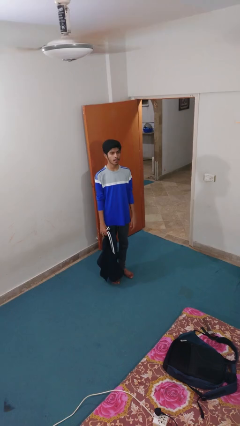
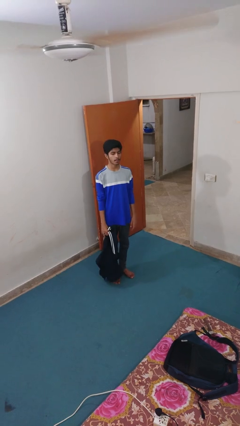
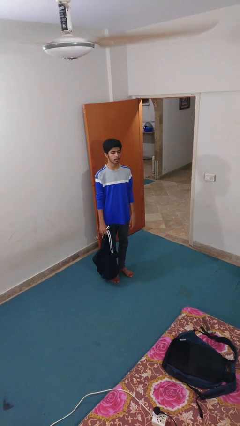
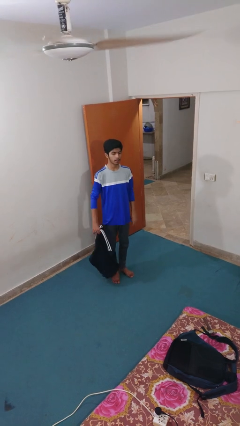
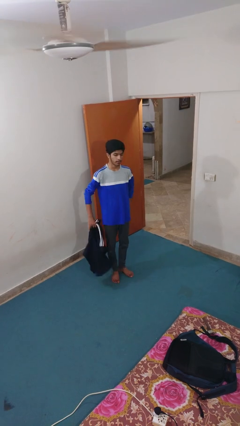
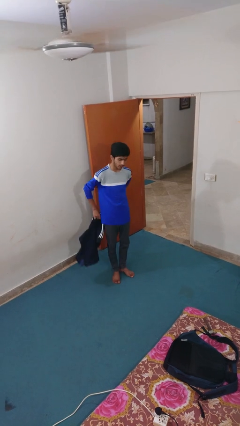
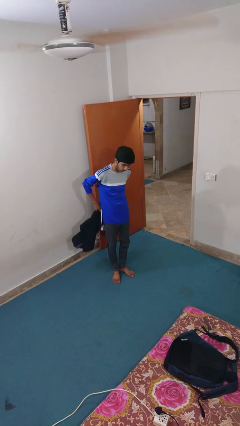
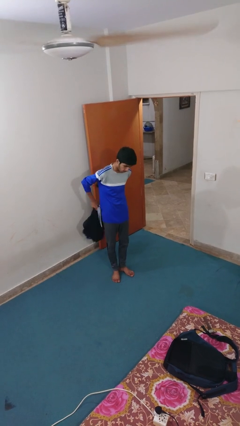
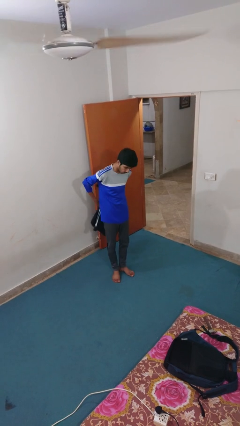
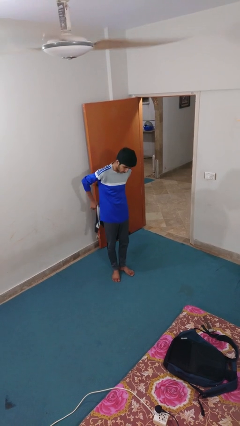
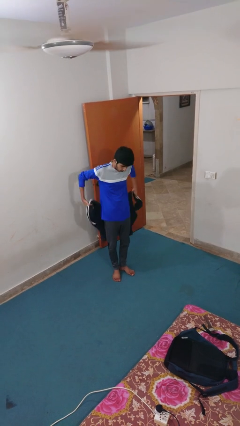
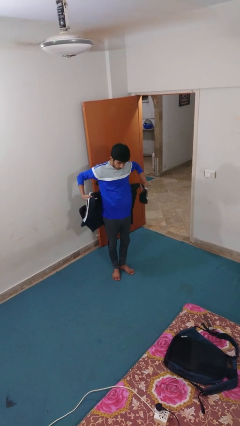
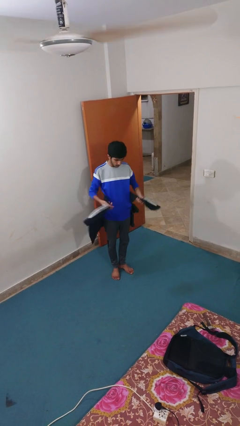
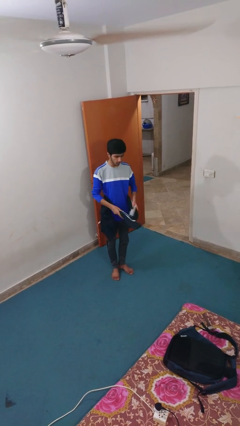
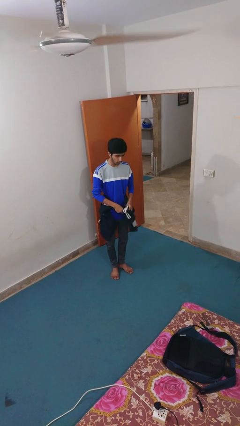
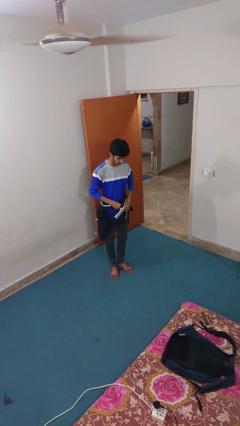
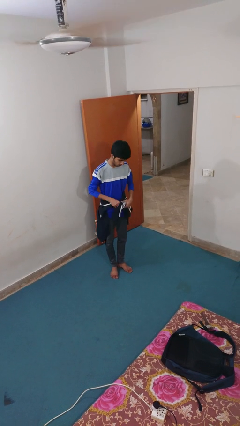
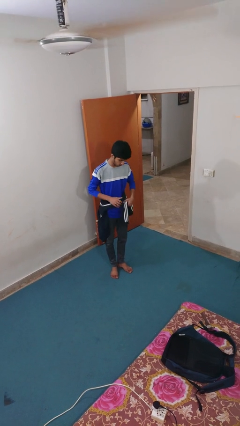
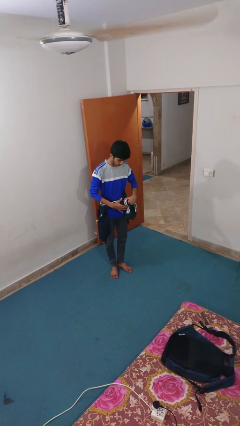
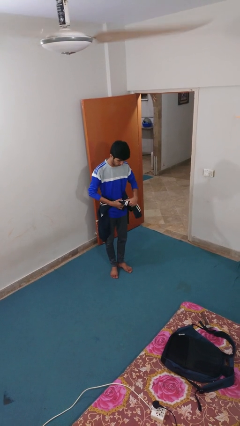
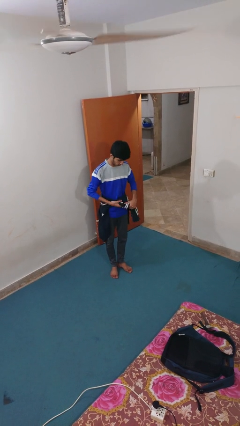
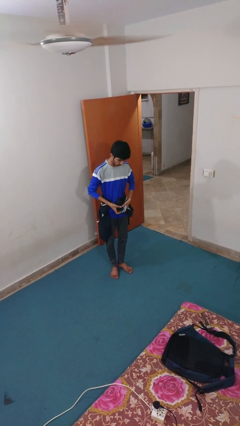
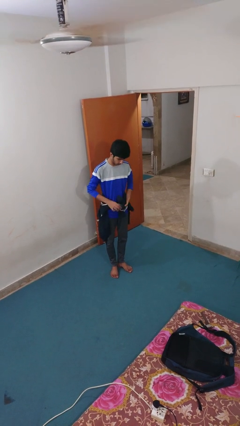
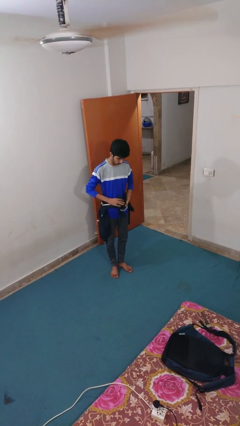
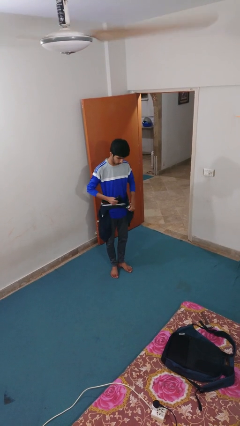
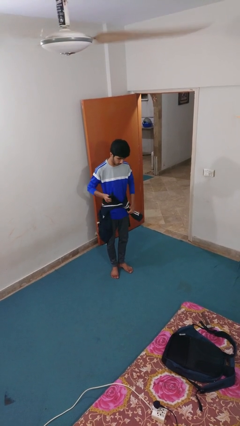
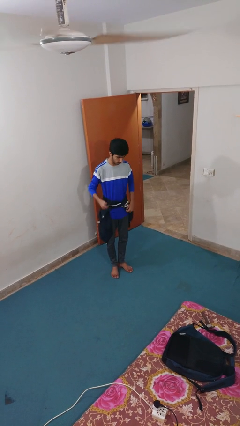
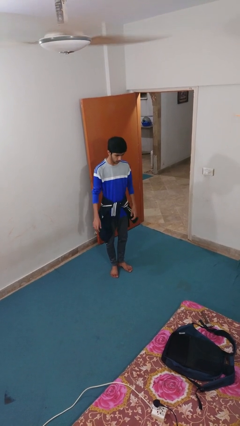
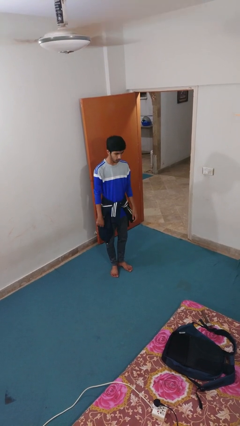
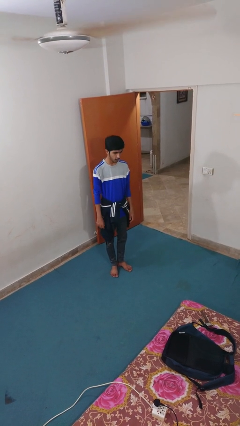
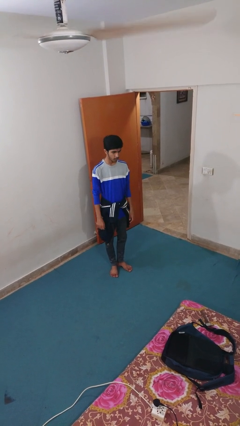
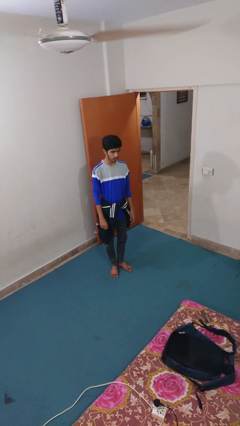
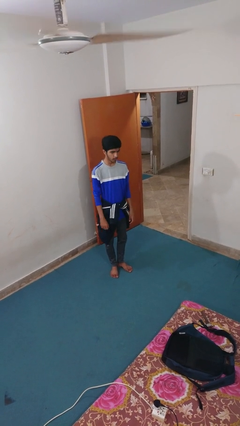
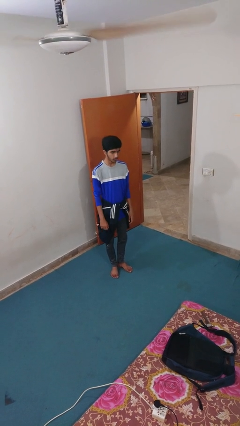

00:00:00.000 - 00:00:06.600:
person ties jacket around waist

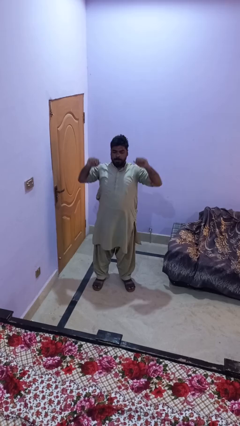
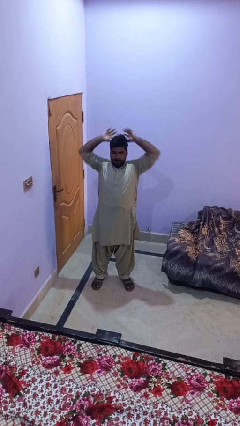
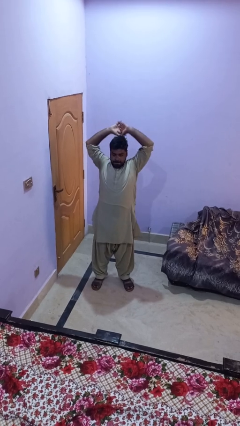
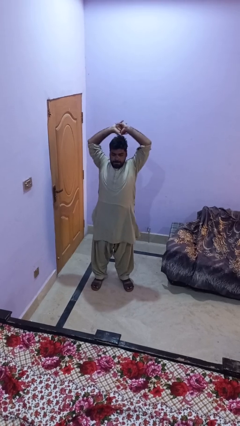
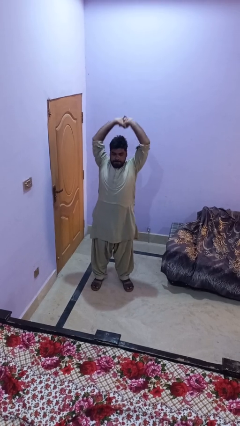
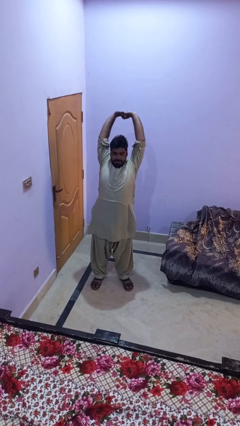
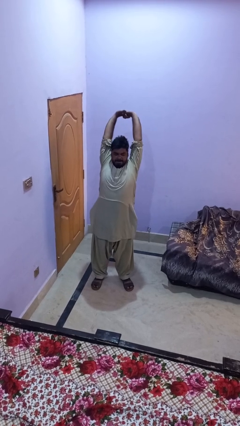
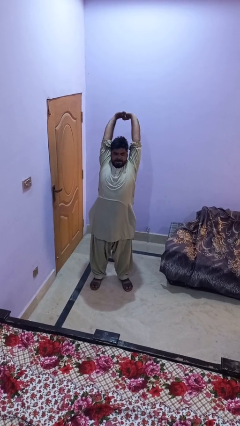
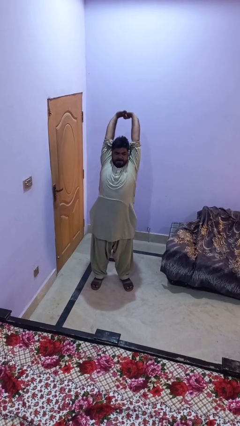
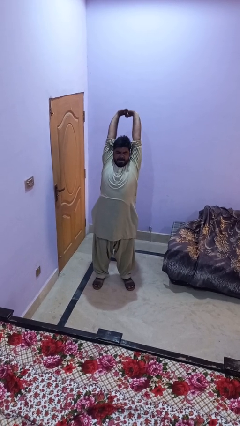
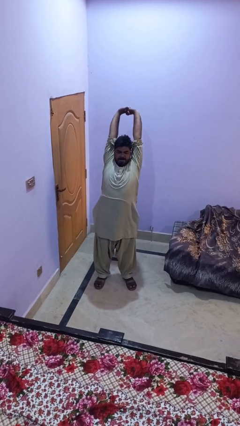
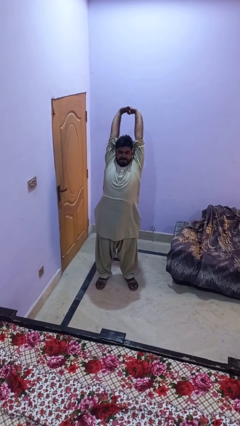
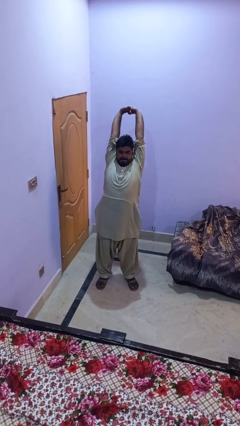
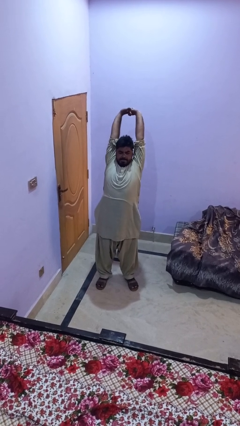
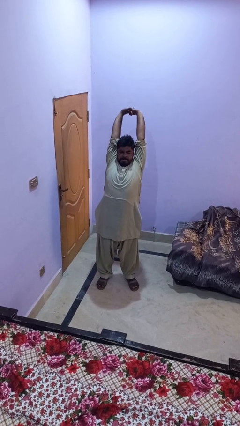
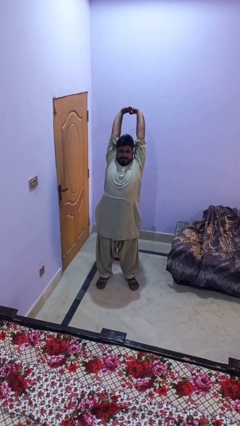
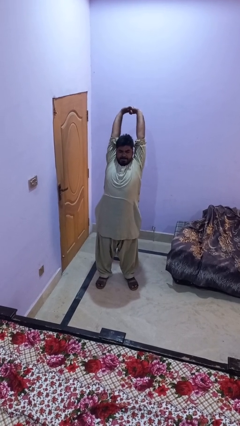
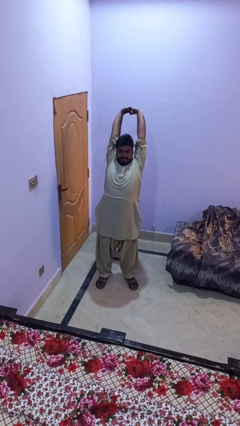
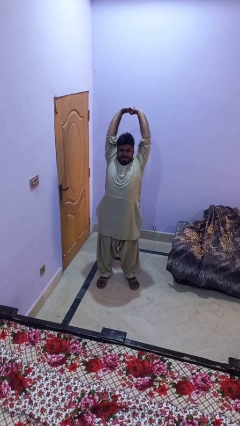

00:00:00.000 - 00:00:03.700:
person stretches arms over head

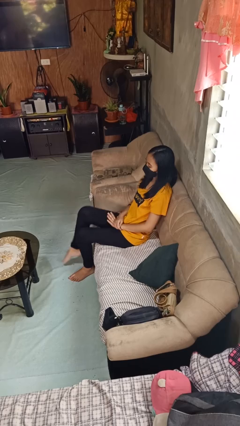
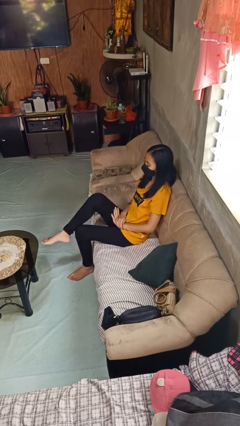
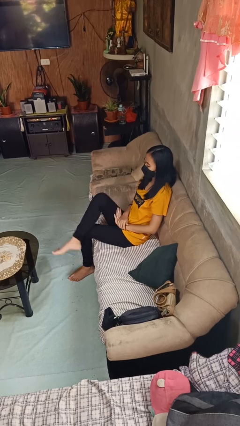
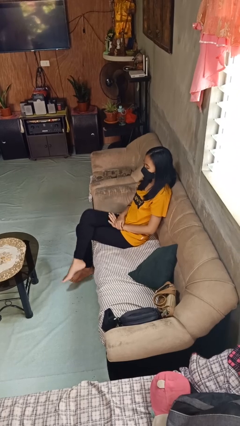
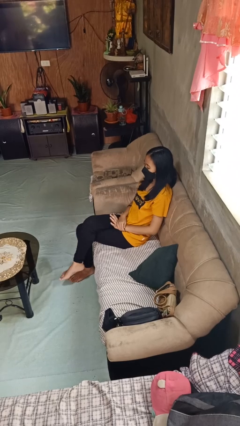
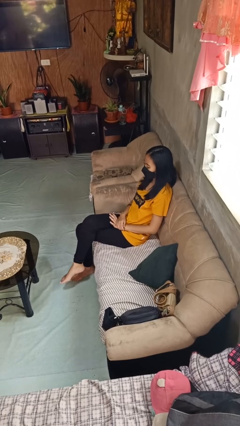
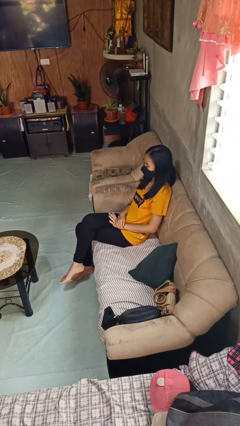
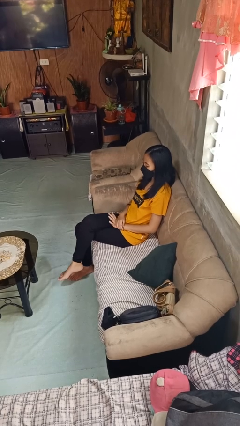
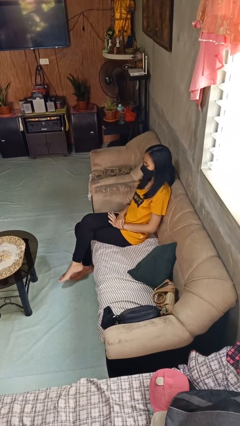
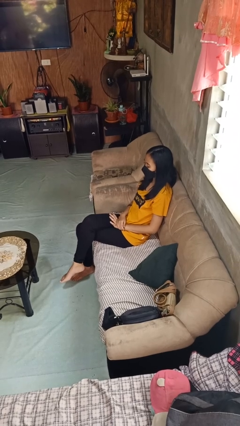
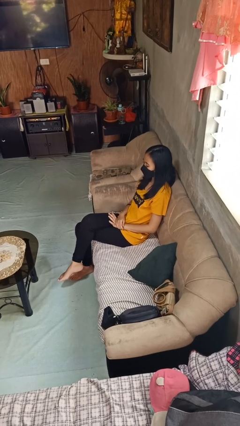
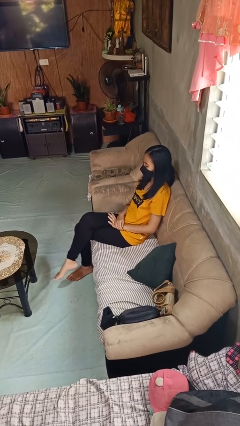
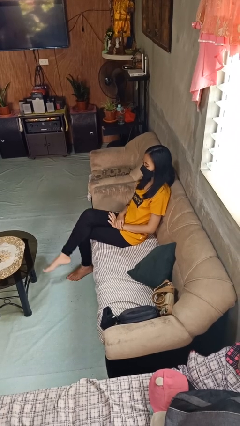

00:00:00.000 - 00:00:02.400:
person crosses legs

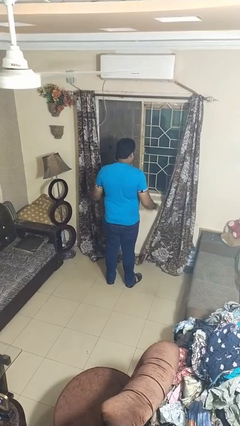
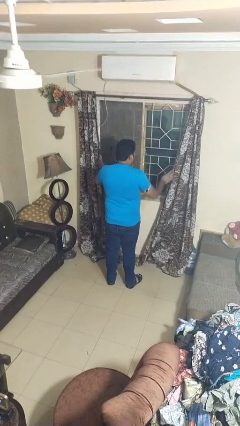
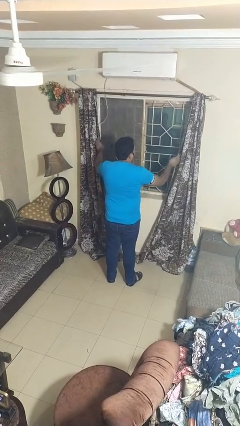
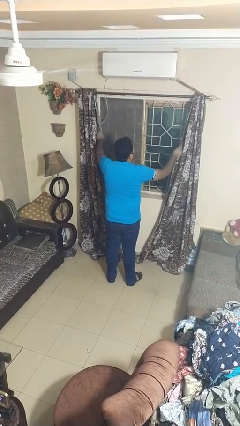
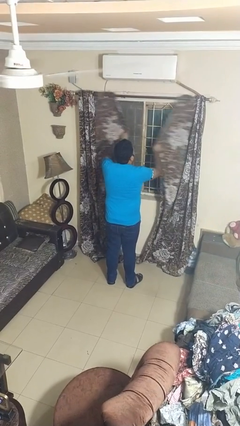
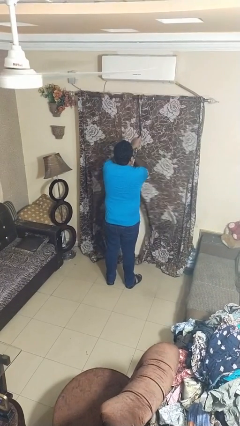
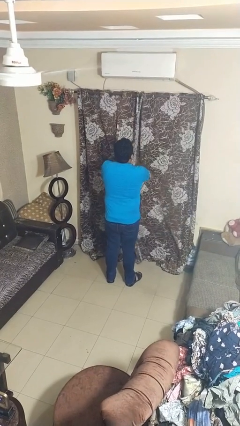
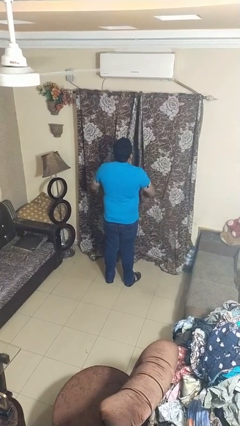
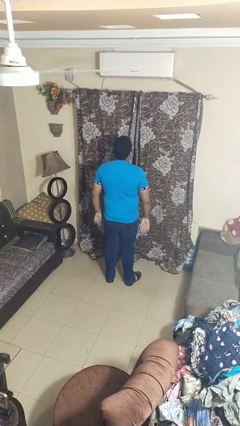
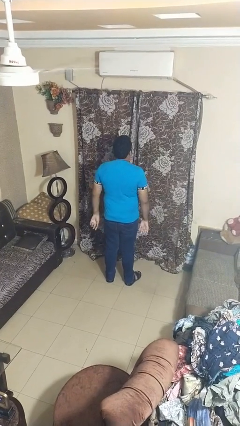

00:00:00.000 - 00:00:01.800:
person closes curtains

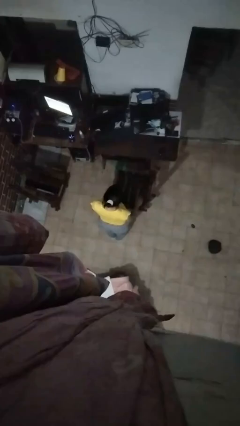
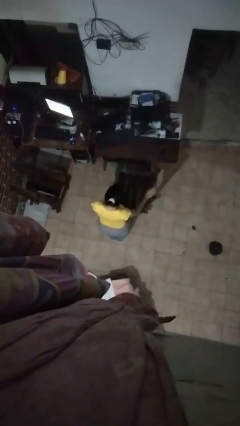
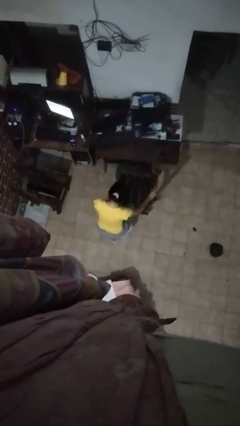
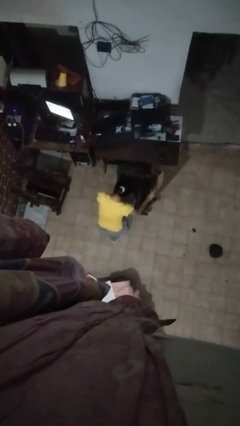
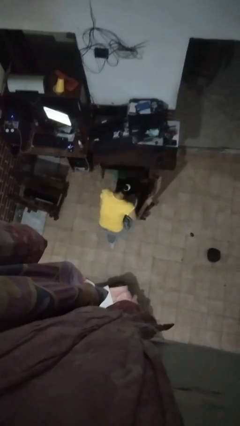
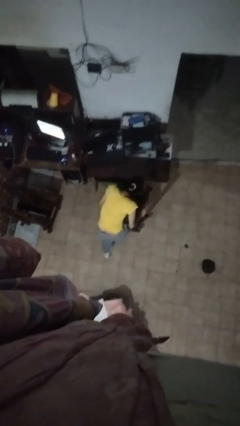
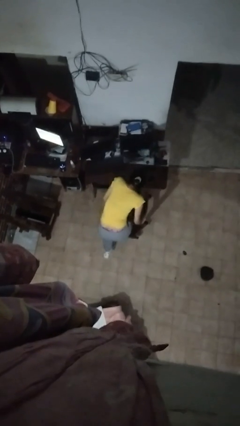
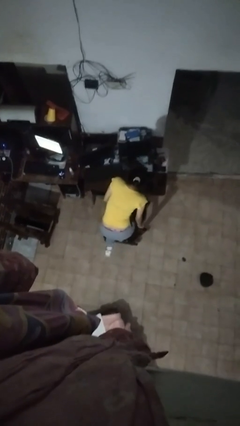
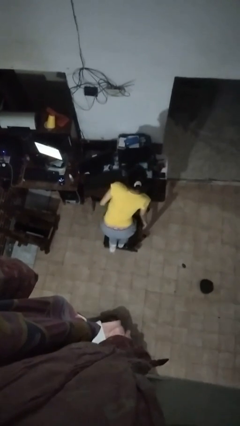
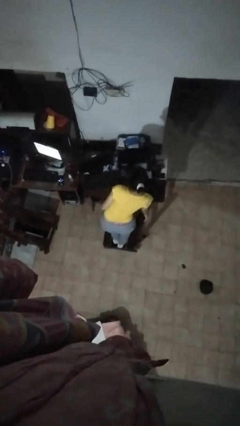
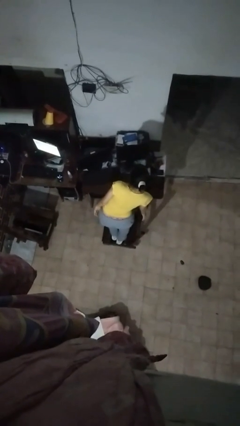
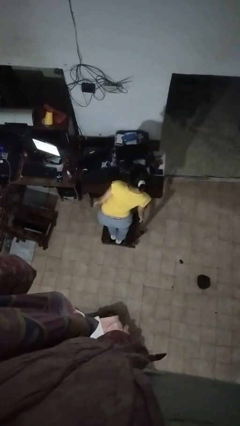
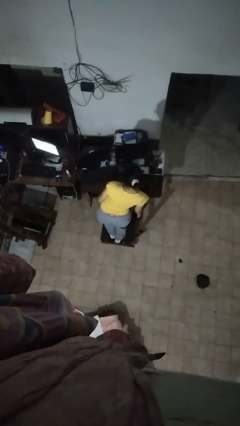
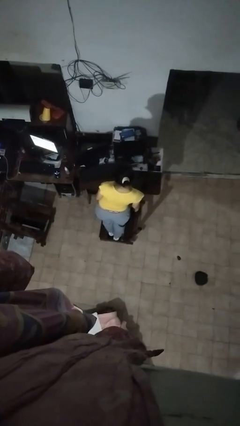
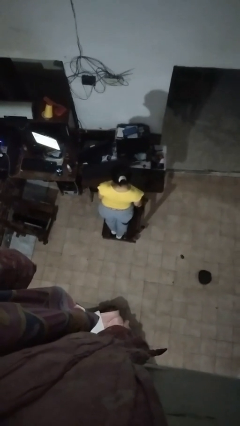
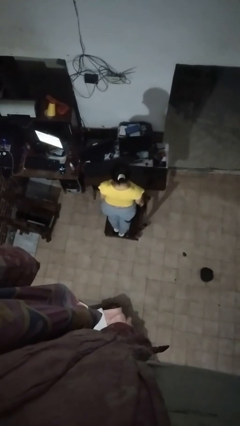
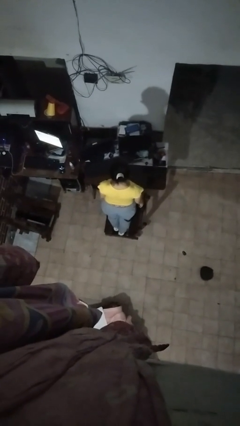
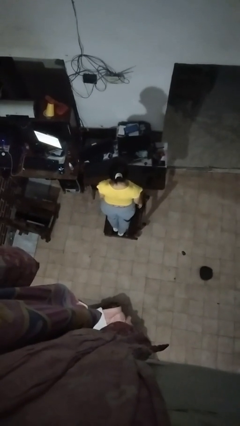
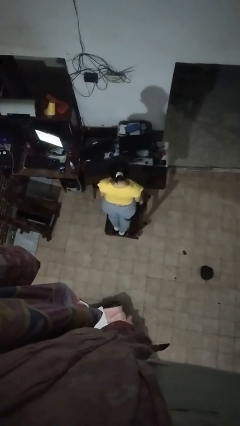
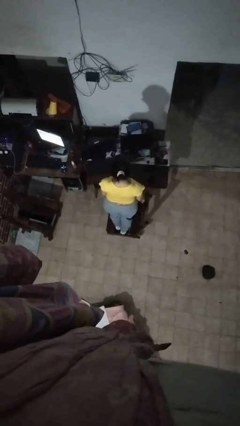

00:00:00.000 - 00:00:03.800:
person climbs on chair
